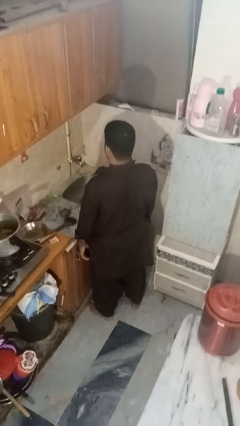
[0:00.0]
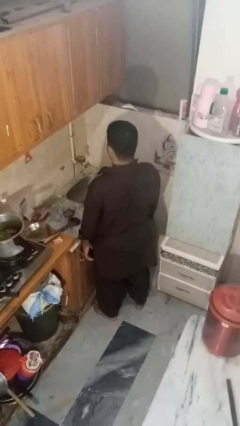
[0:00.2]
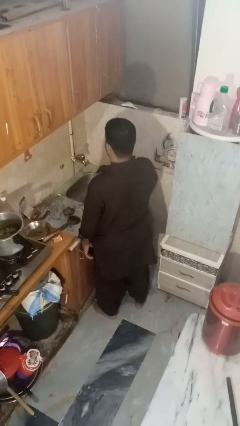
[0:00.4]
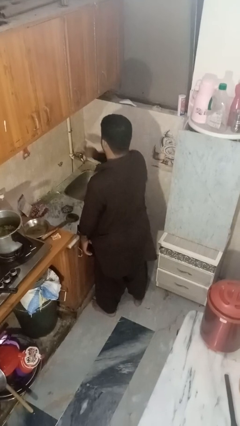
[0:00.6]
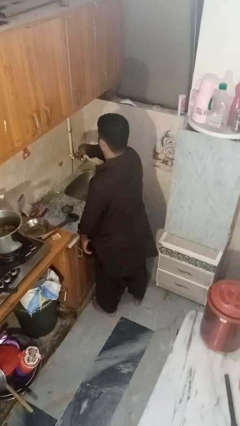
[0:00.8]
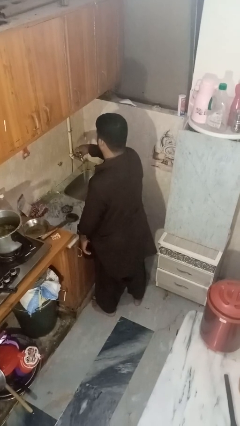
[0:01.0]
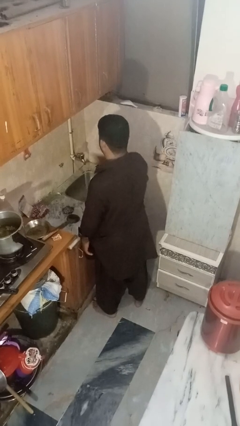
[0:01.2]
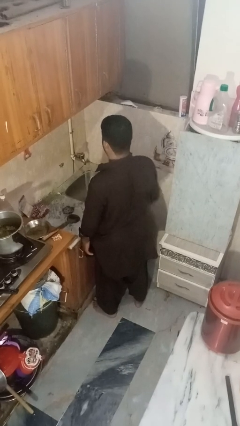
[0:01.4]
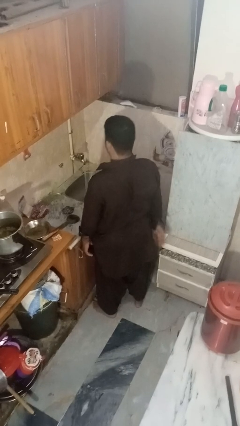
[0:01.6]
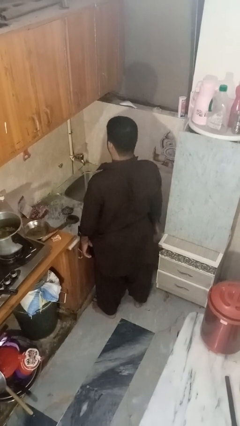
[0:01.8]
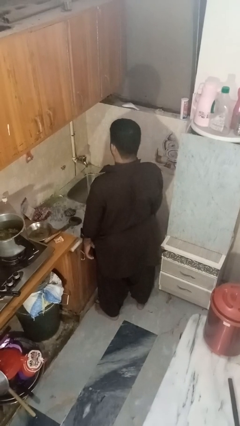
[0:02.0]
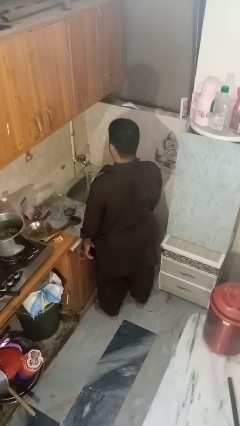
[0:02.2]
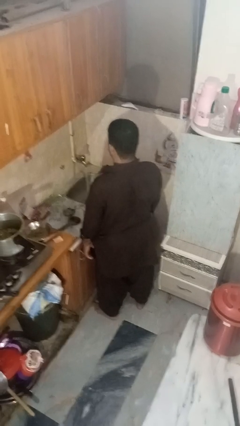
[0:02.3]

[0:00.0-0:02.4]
person turns on faucet

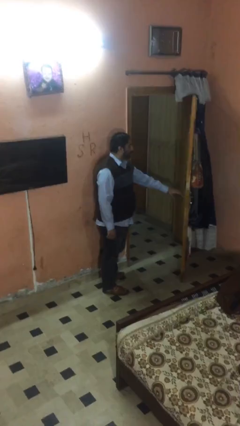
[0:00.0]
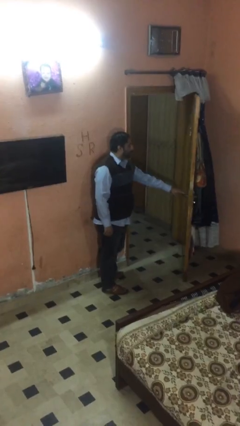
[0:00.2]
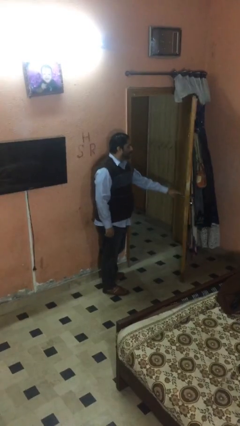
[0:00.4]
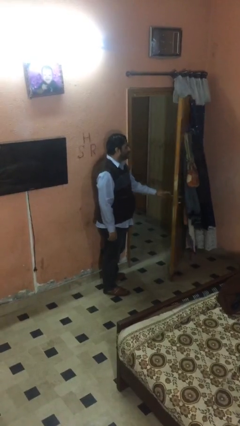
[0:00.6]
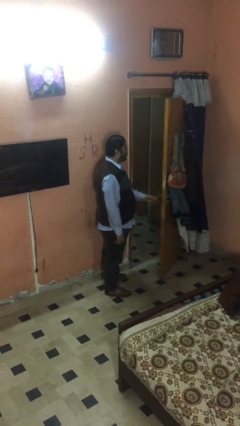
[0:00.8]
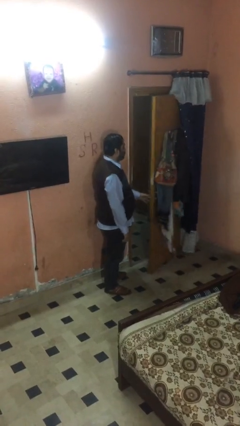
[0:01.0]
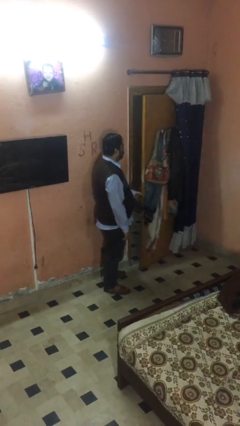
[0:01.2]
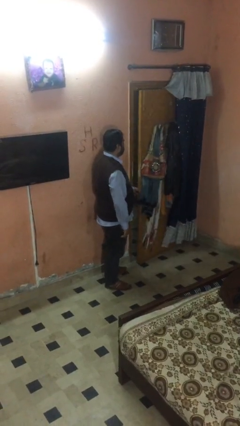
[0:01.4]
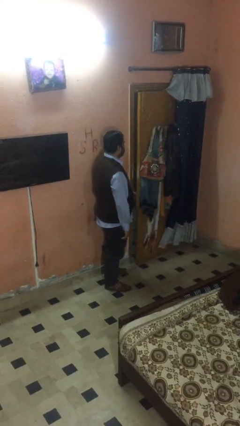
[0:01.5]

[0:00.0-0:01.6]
person closes facility door

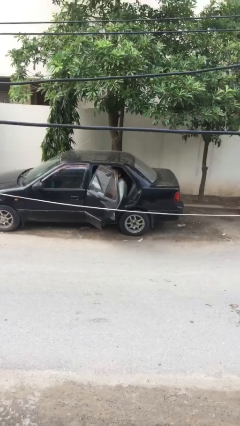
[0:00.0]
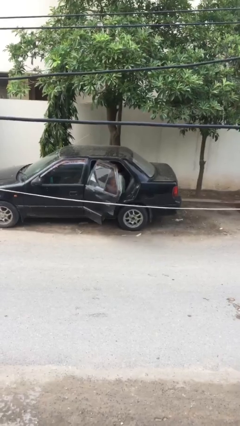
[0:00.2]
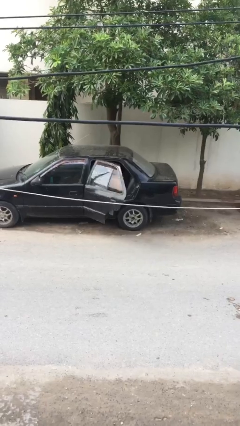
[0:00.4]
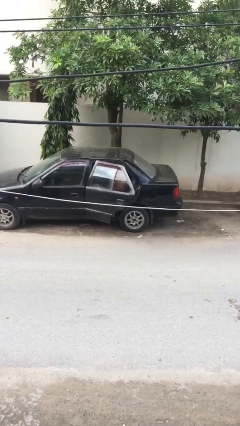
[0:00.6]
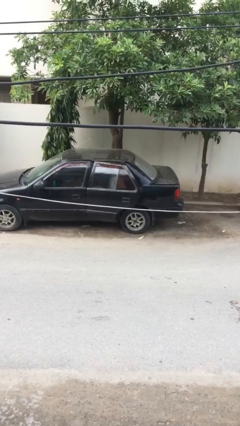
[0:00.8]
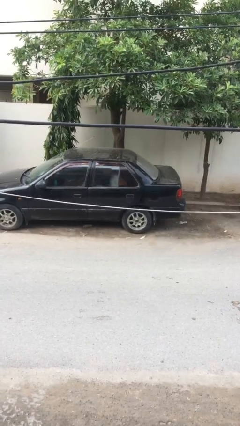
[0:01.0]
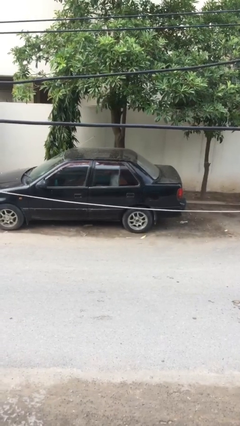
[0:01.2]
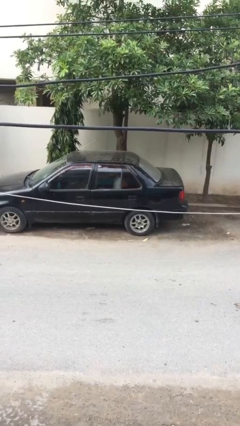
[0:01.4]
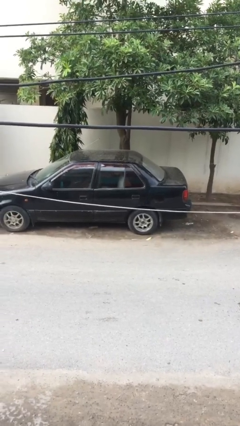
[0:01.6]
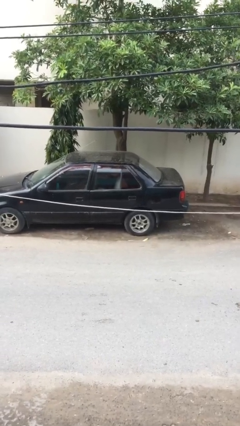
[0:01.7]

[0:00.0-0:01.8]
person closes car door

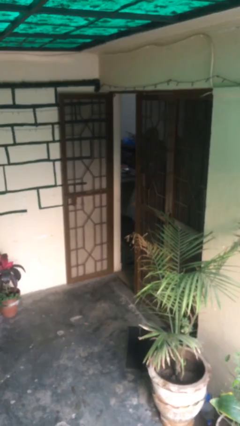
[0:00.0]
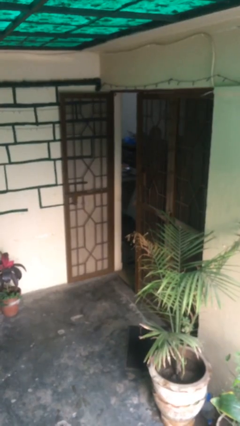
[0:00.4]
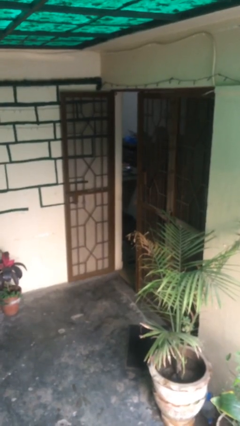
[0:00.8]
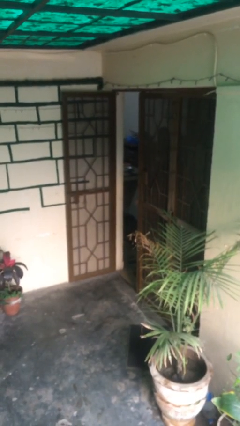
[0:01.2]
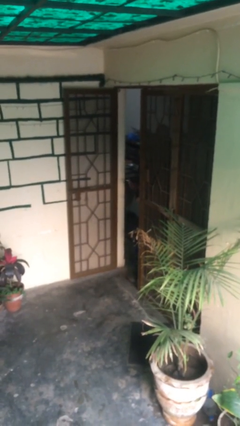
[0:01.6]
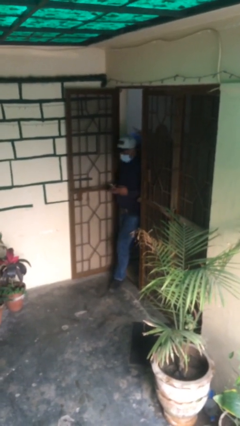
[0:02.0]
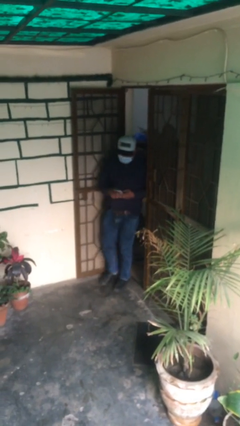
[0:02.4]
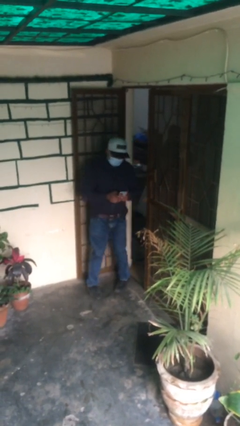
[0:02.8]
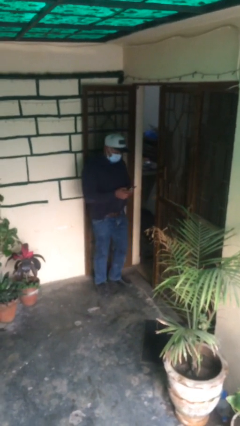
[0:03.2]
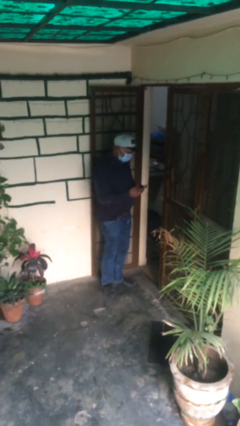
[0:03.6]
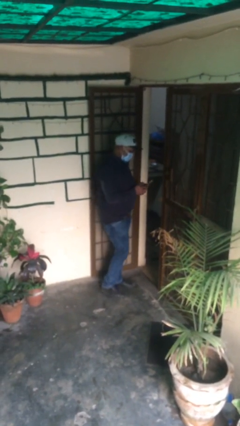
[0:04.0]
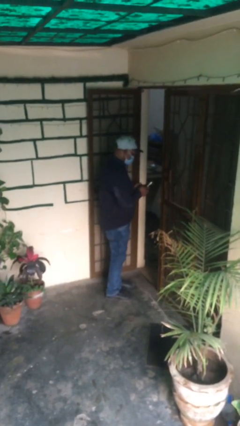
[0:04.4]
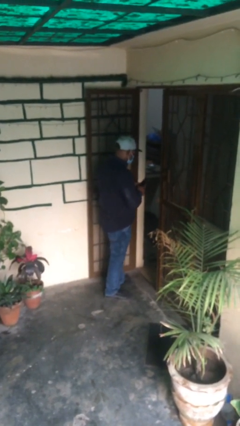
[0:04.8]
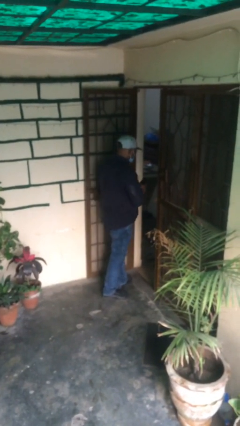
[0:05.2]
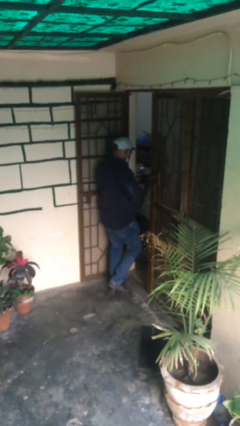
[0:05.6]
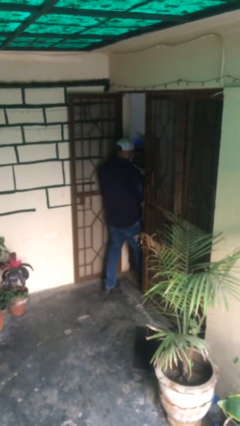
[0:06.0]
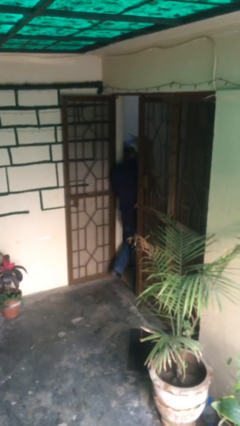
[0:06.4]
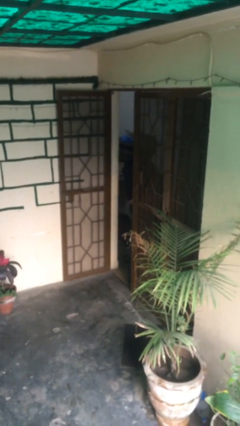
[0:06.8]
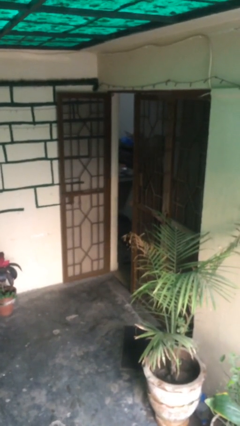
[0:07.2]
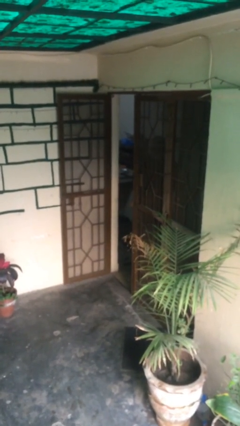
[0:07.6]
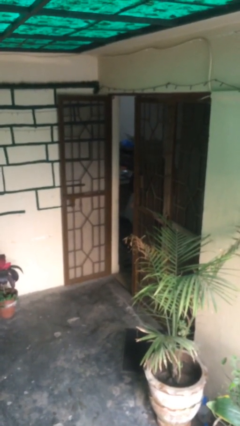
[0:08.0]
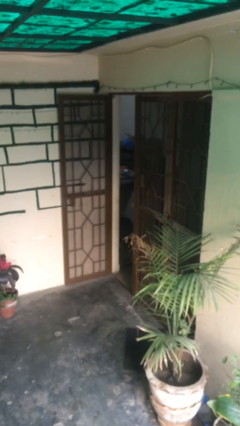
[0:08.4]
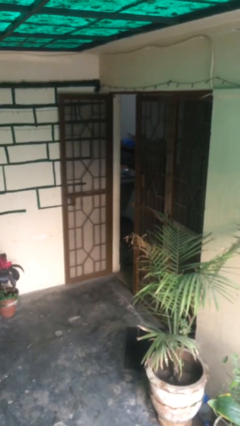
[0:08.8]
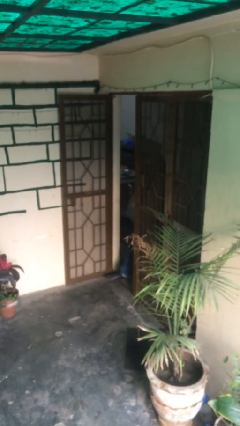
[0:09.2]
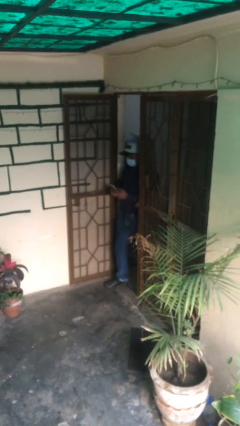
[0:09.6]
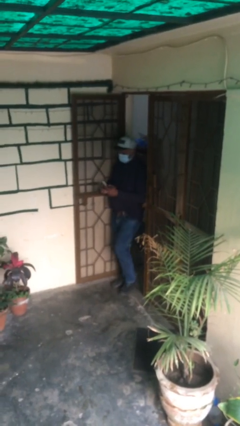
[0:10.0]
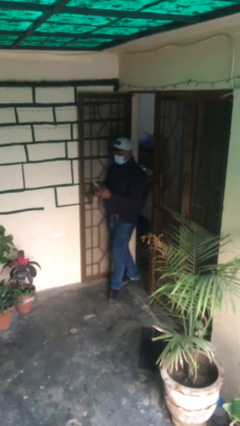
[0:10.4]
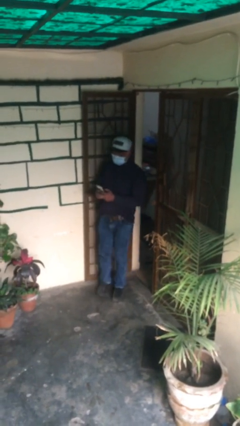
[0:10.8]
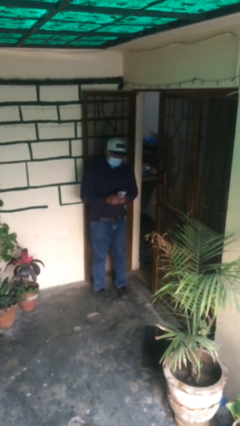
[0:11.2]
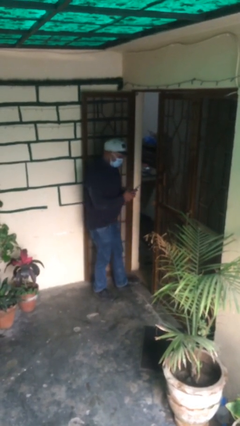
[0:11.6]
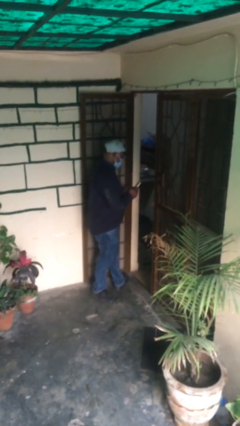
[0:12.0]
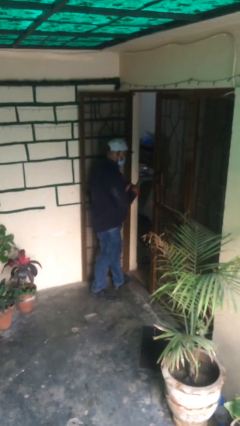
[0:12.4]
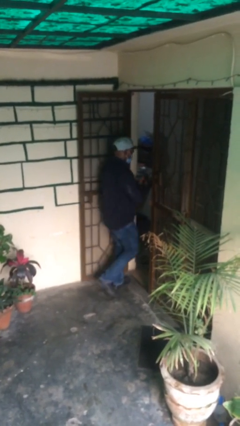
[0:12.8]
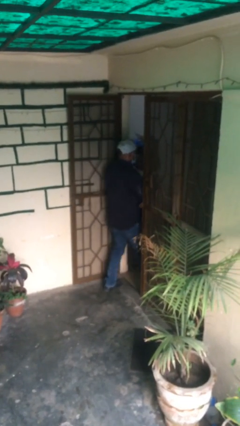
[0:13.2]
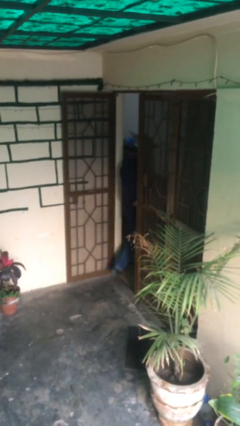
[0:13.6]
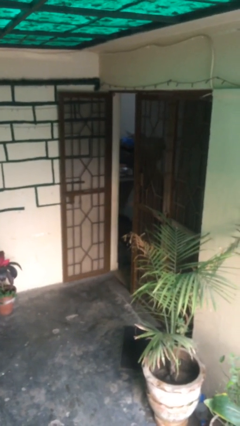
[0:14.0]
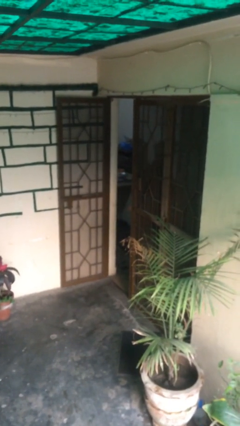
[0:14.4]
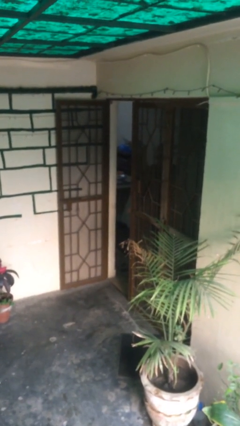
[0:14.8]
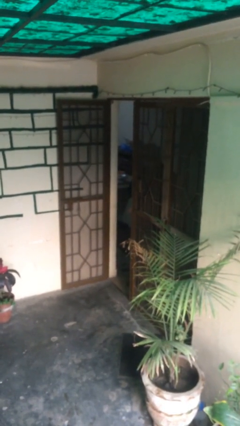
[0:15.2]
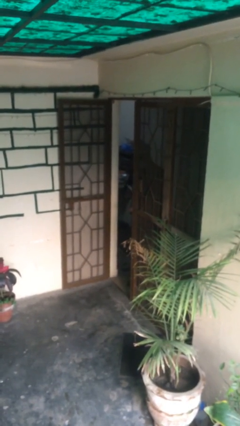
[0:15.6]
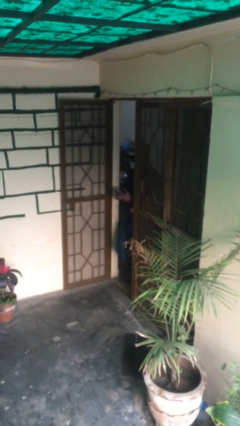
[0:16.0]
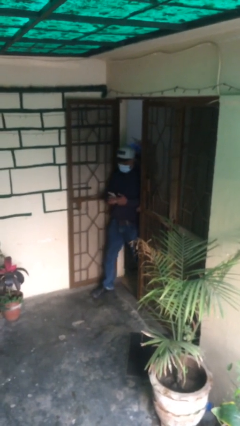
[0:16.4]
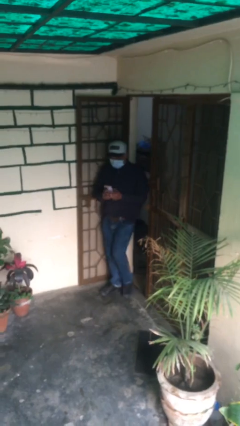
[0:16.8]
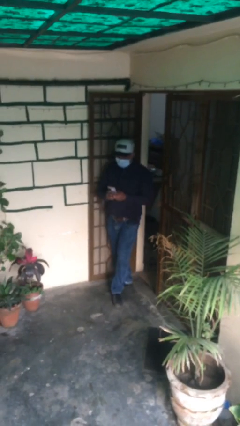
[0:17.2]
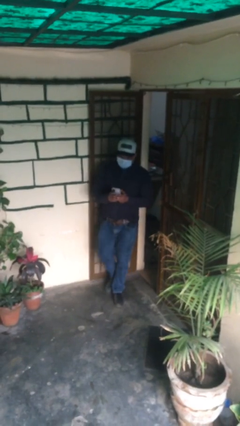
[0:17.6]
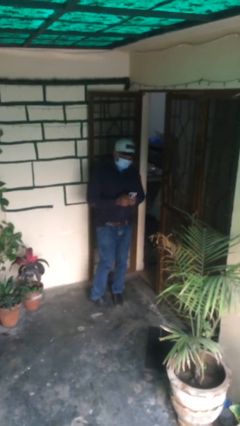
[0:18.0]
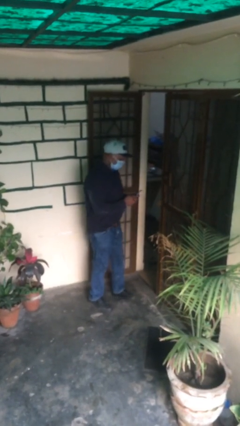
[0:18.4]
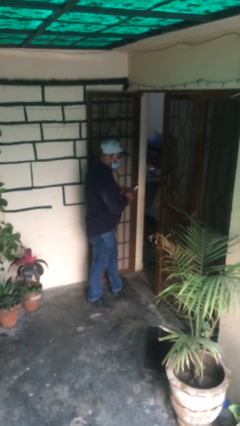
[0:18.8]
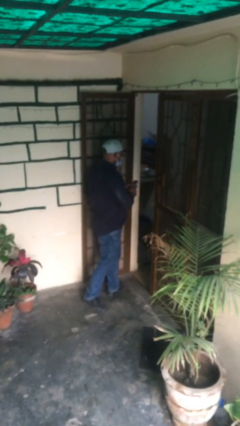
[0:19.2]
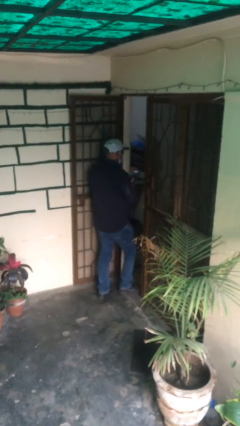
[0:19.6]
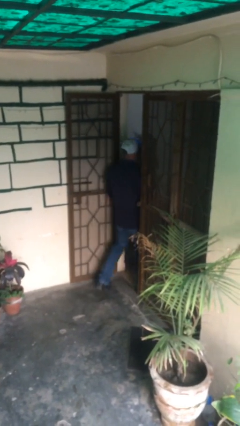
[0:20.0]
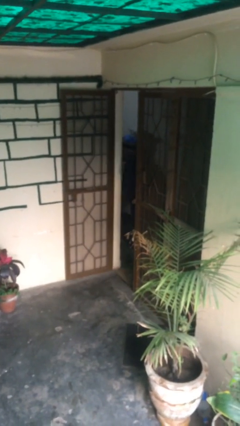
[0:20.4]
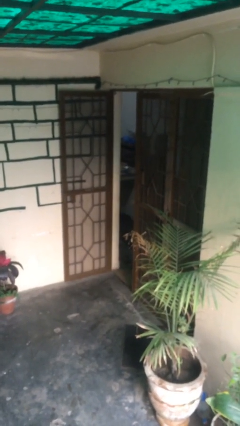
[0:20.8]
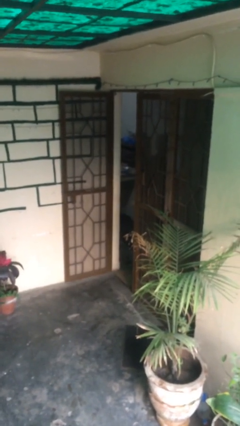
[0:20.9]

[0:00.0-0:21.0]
person texts on phone

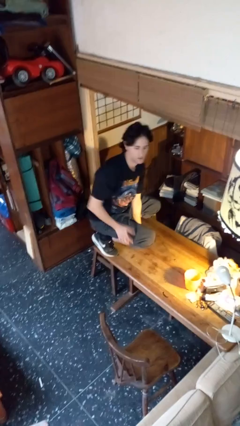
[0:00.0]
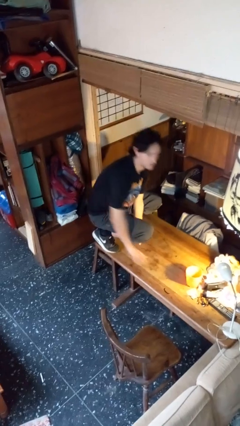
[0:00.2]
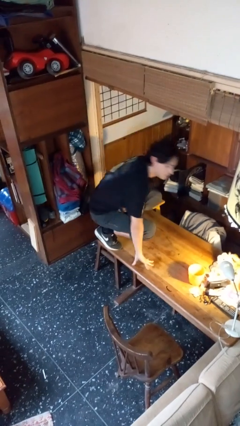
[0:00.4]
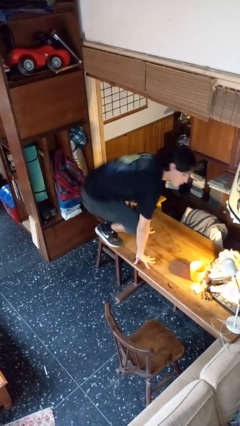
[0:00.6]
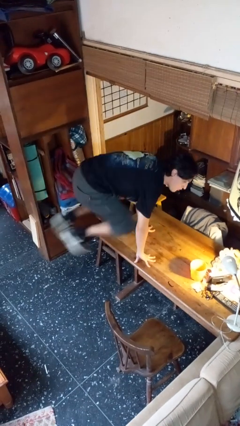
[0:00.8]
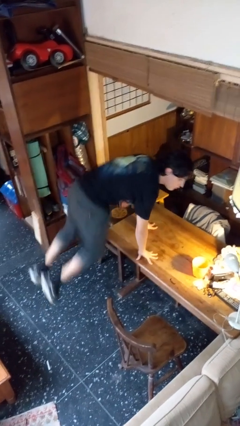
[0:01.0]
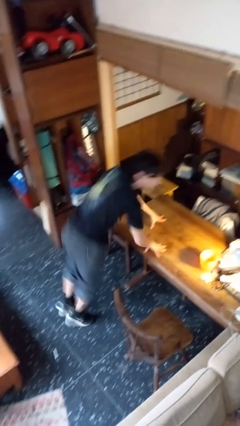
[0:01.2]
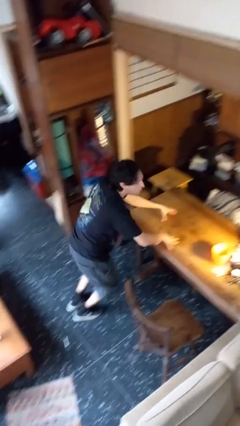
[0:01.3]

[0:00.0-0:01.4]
person climbs off table

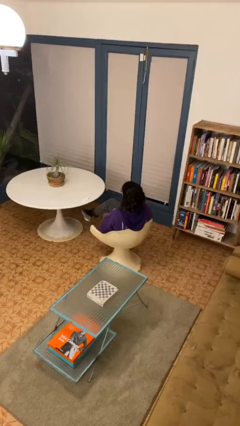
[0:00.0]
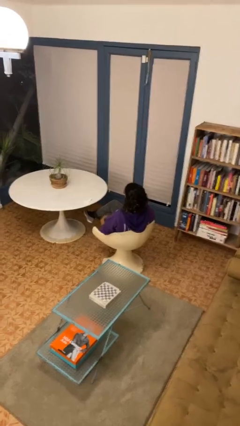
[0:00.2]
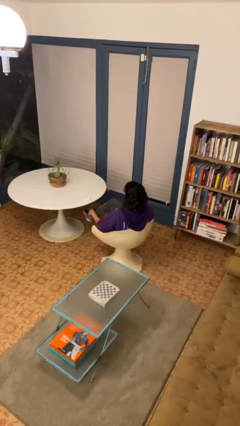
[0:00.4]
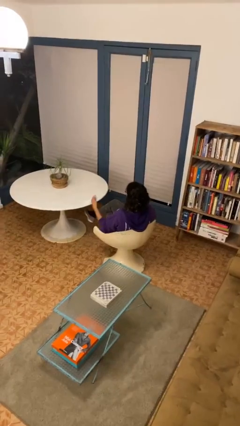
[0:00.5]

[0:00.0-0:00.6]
person pats head
